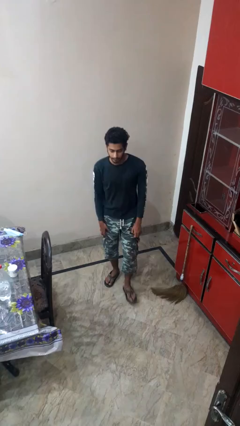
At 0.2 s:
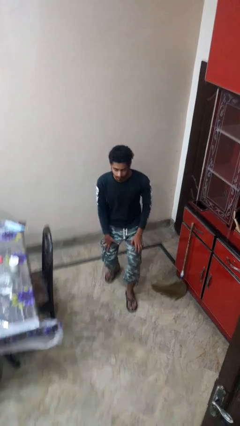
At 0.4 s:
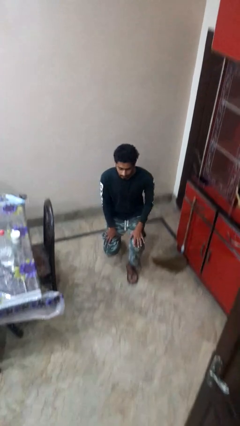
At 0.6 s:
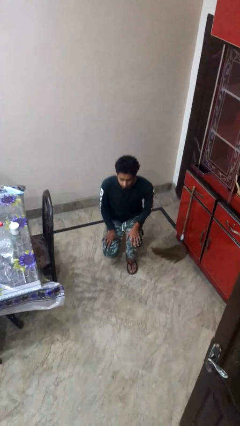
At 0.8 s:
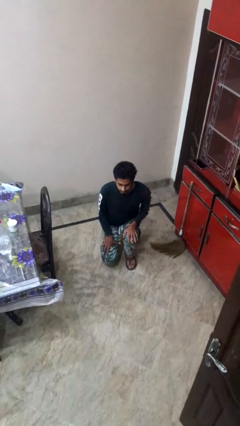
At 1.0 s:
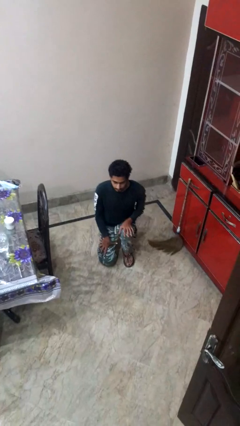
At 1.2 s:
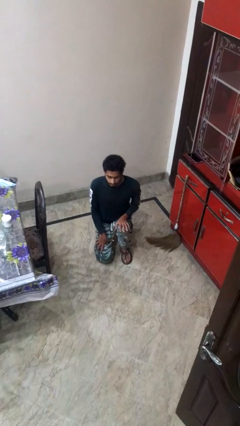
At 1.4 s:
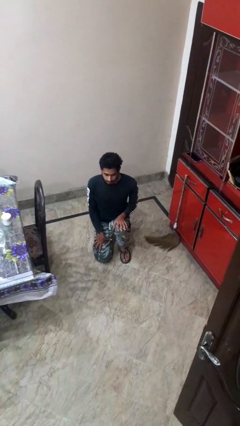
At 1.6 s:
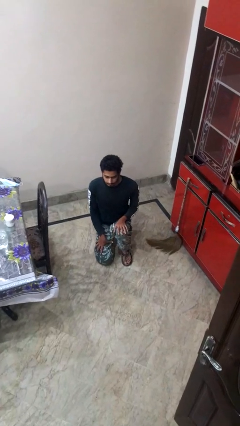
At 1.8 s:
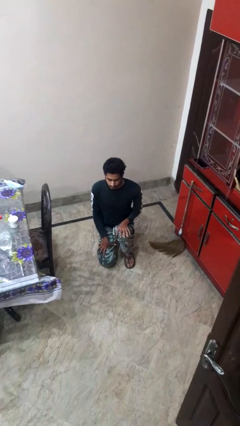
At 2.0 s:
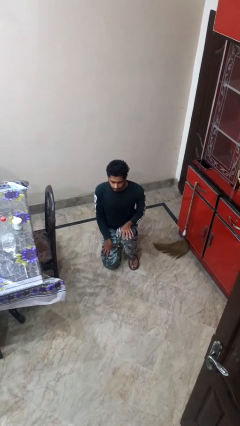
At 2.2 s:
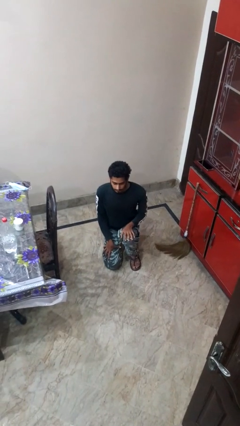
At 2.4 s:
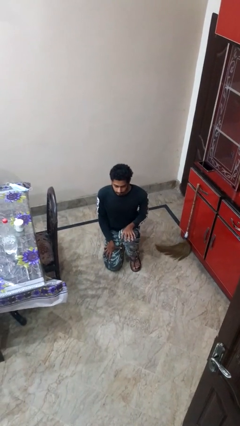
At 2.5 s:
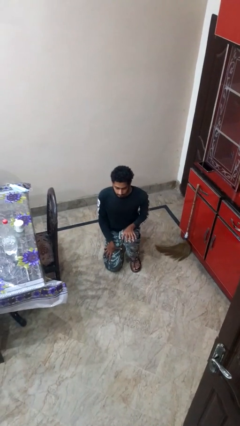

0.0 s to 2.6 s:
person kneels

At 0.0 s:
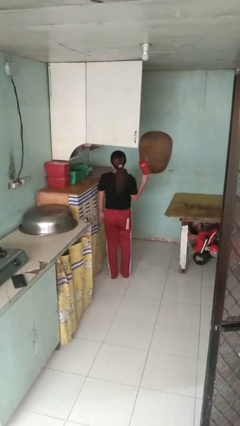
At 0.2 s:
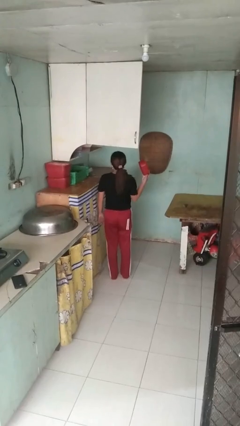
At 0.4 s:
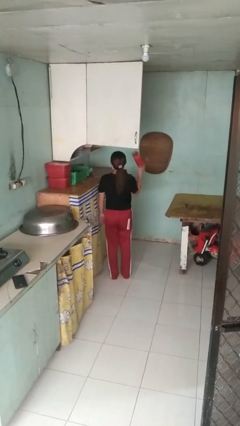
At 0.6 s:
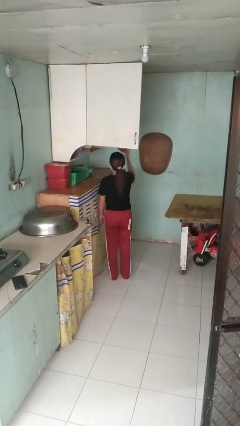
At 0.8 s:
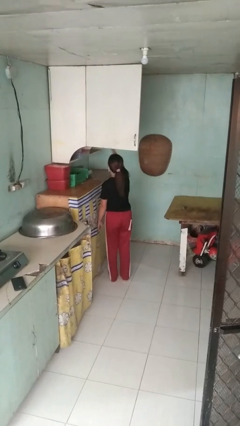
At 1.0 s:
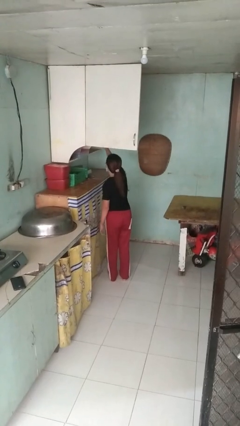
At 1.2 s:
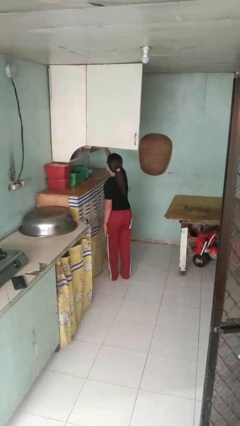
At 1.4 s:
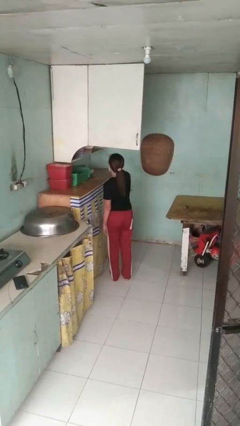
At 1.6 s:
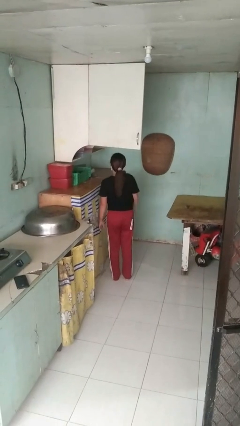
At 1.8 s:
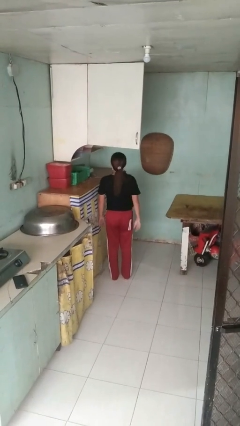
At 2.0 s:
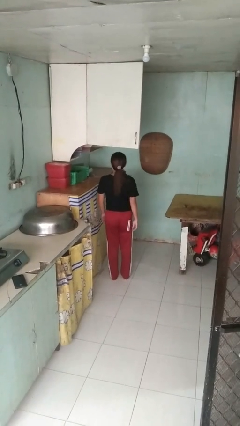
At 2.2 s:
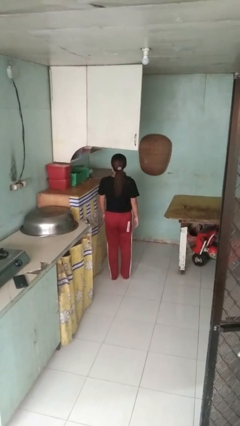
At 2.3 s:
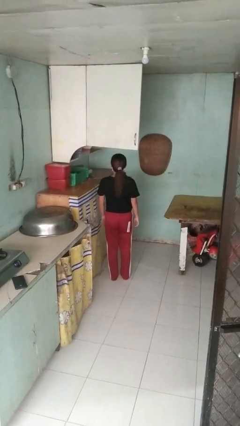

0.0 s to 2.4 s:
person puts object in cabinet

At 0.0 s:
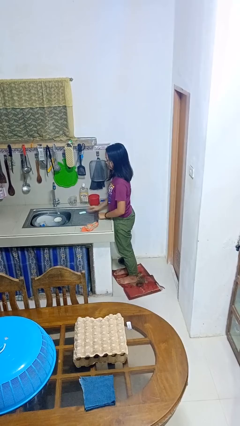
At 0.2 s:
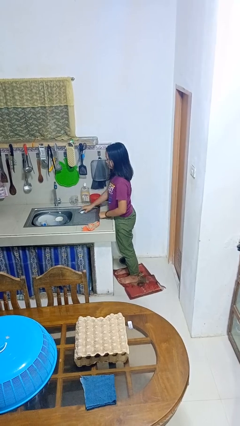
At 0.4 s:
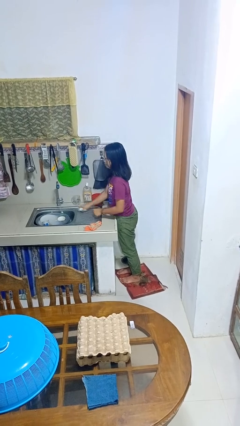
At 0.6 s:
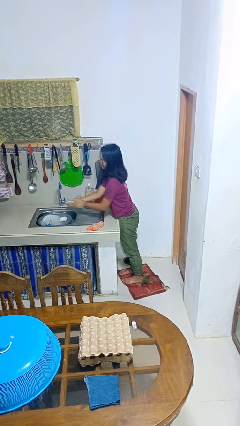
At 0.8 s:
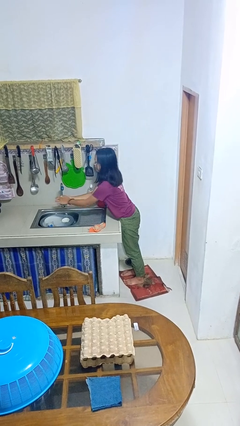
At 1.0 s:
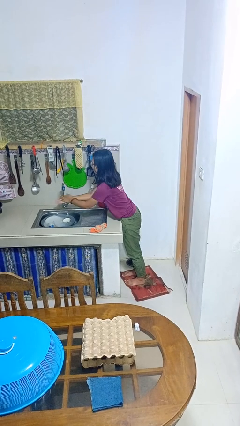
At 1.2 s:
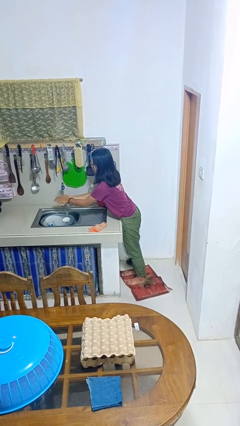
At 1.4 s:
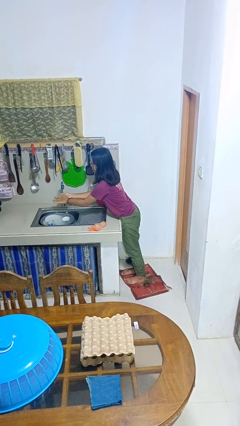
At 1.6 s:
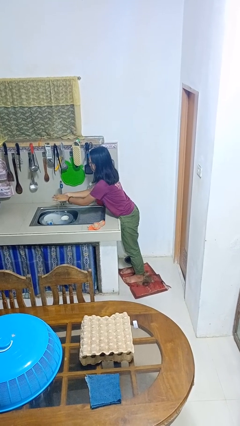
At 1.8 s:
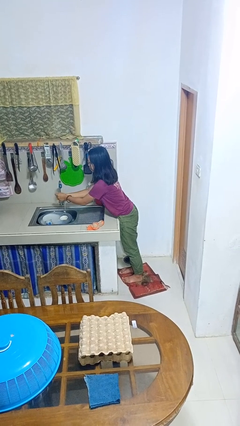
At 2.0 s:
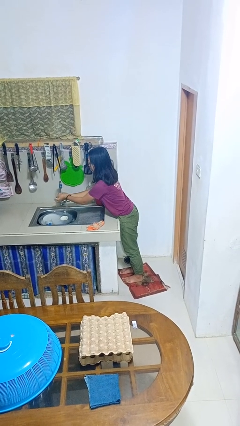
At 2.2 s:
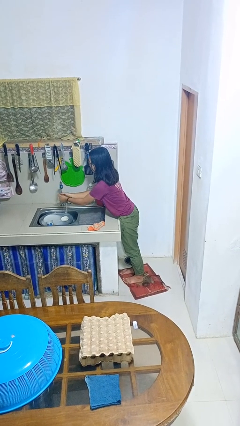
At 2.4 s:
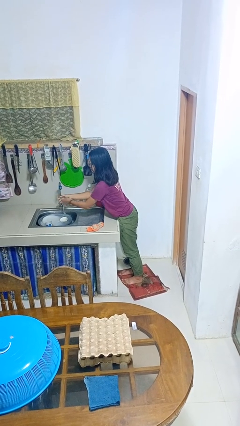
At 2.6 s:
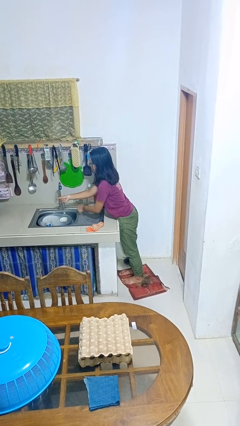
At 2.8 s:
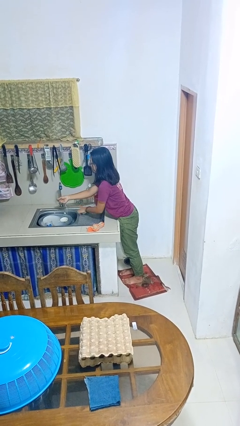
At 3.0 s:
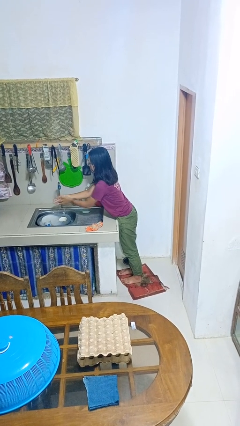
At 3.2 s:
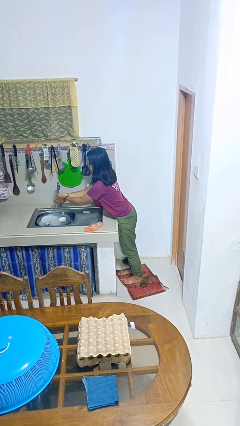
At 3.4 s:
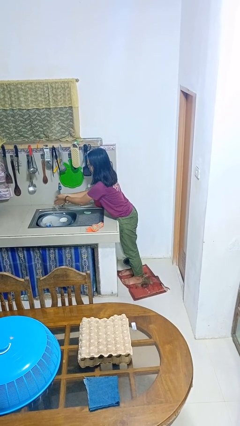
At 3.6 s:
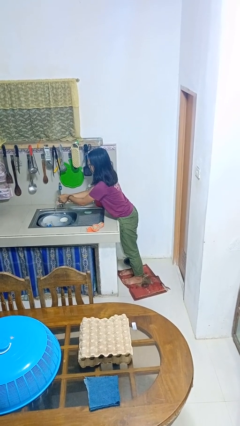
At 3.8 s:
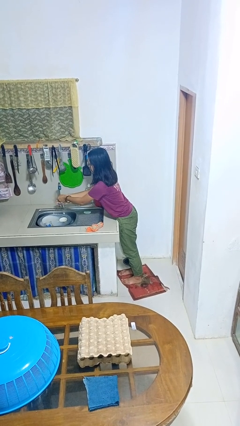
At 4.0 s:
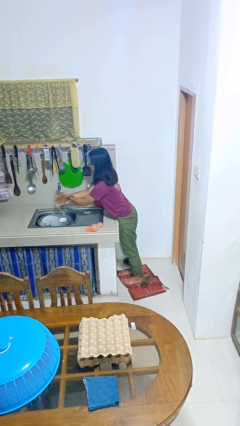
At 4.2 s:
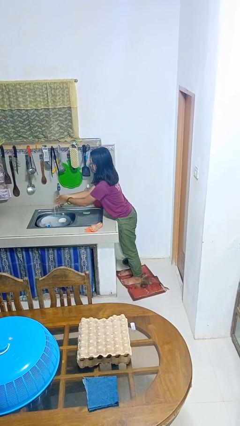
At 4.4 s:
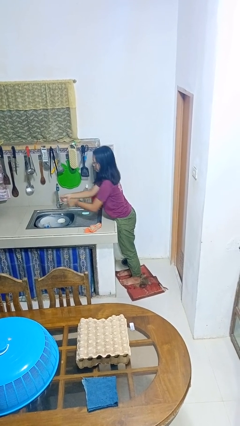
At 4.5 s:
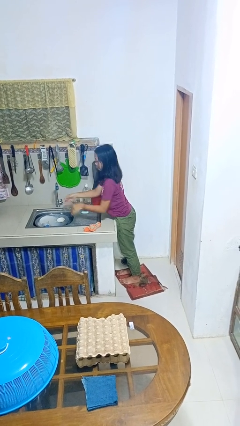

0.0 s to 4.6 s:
person washes hands

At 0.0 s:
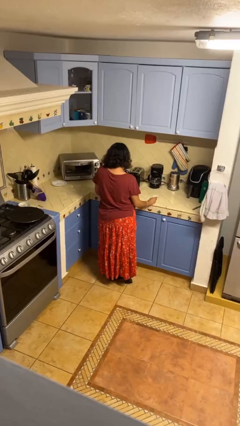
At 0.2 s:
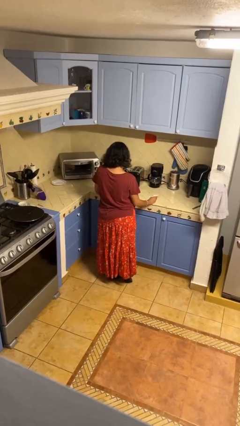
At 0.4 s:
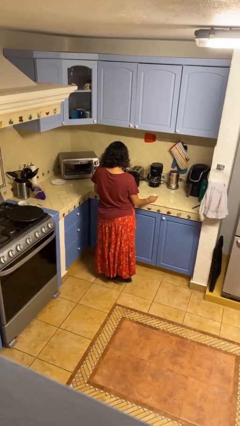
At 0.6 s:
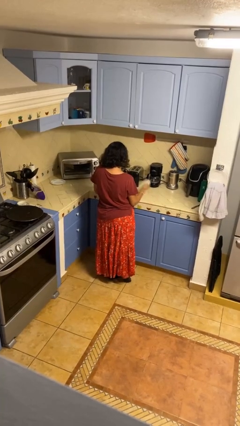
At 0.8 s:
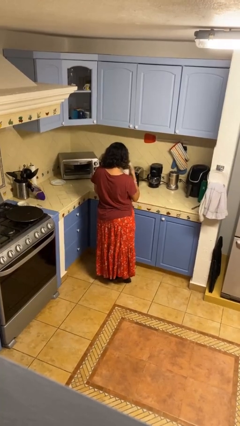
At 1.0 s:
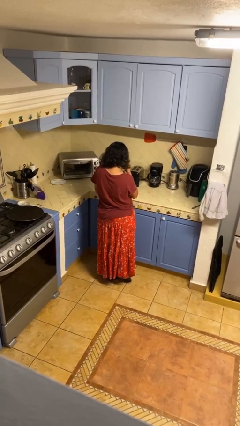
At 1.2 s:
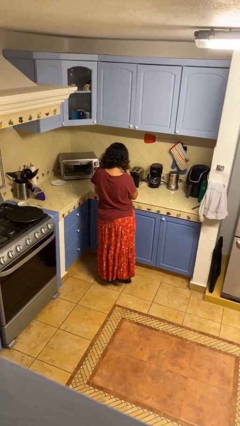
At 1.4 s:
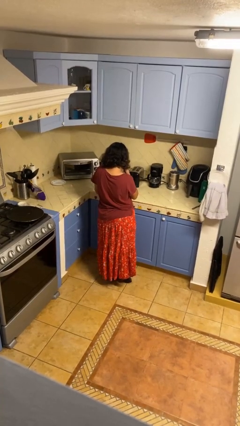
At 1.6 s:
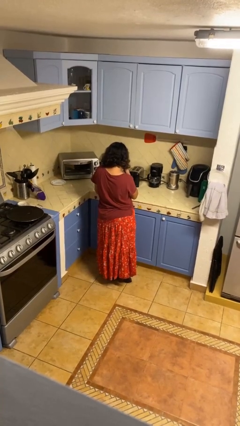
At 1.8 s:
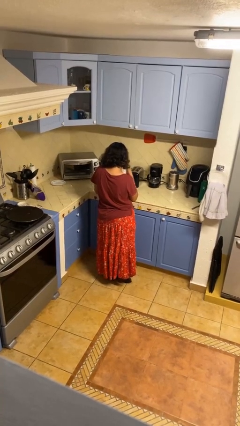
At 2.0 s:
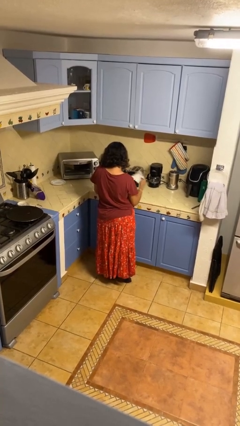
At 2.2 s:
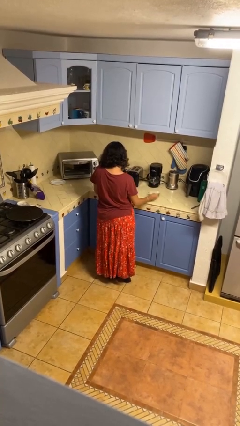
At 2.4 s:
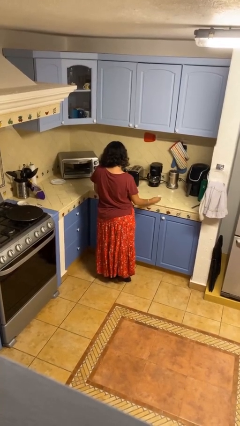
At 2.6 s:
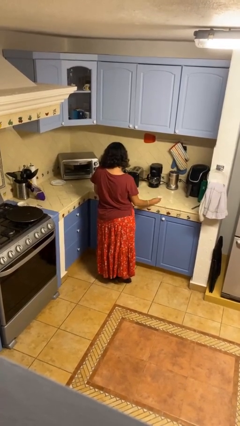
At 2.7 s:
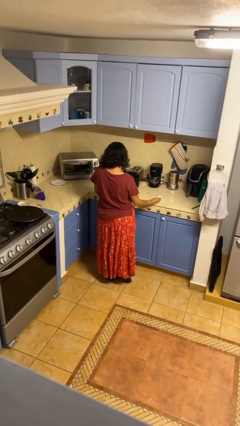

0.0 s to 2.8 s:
person wipes mouth with napkin

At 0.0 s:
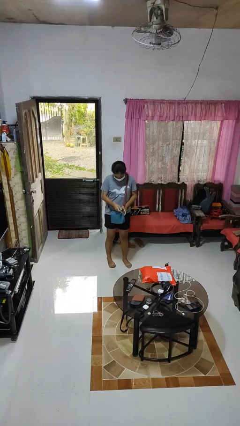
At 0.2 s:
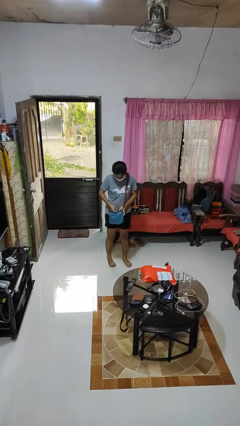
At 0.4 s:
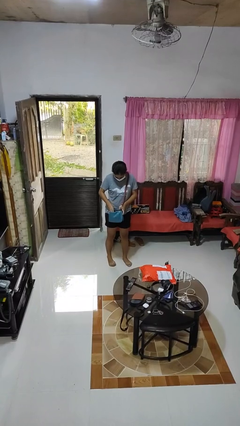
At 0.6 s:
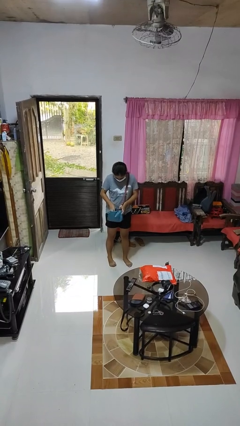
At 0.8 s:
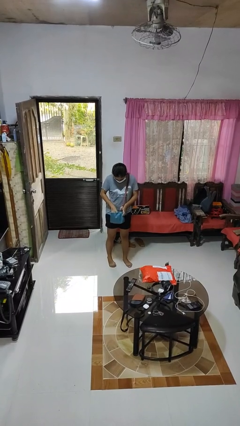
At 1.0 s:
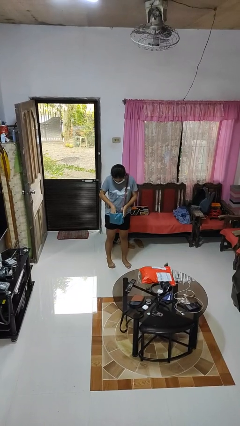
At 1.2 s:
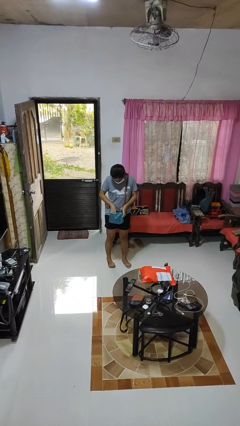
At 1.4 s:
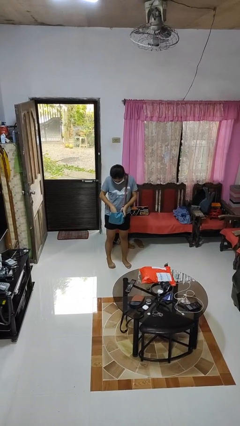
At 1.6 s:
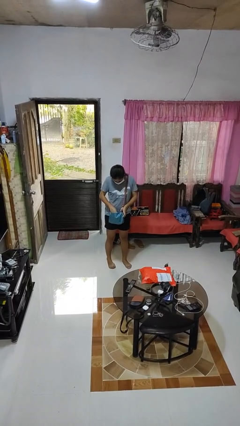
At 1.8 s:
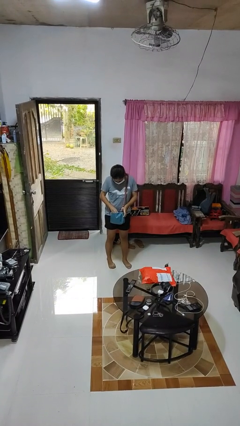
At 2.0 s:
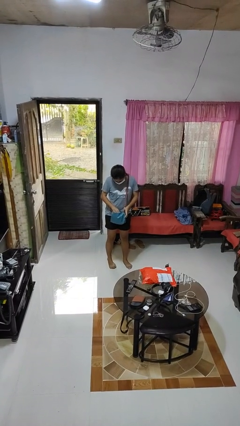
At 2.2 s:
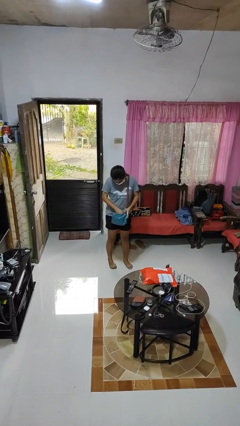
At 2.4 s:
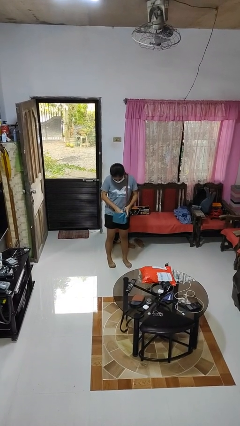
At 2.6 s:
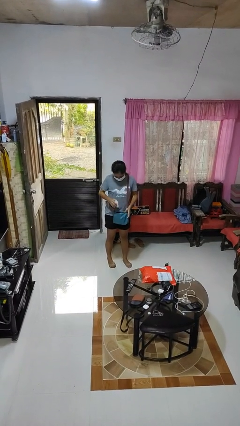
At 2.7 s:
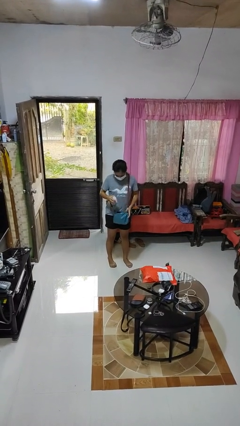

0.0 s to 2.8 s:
person searches in purse

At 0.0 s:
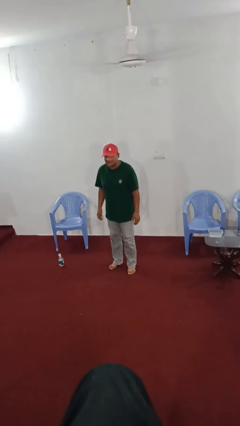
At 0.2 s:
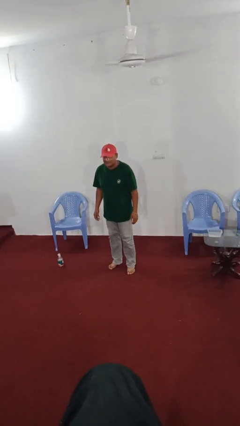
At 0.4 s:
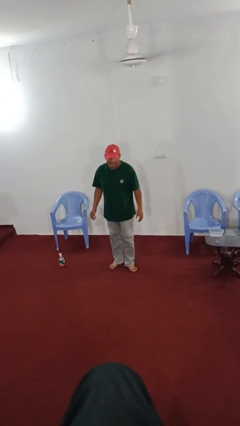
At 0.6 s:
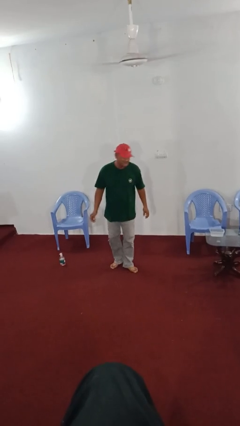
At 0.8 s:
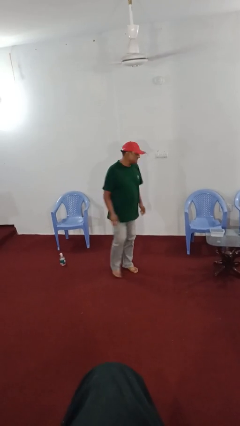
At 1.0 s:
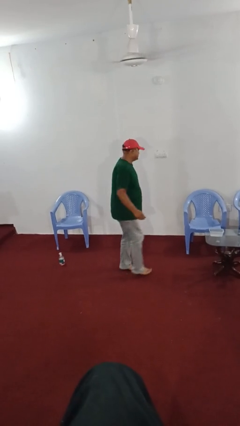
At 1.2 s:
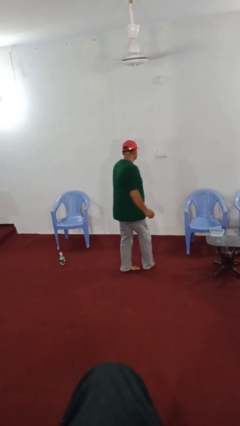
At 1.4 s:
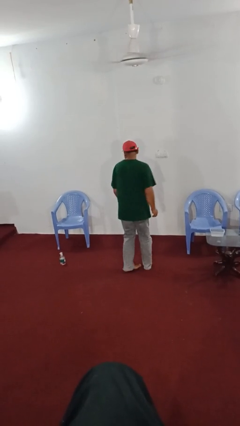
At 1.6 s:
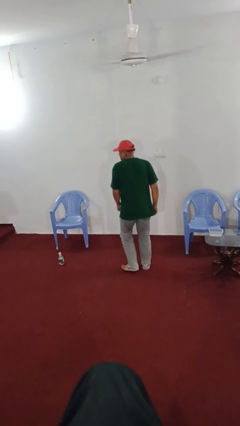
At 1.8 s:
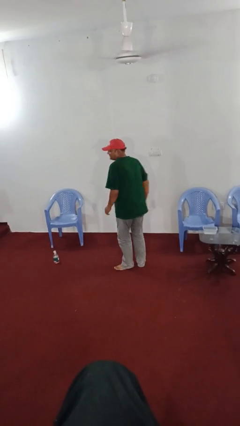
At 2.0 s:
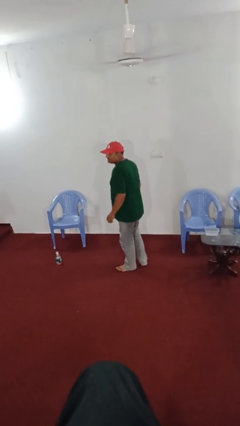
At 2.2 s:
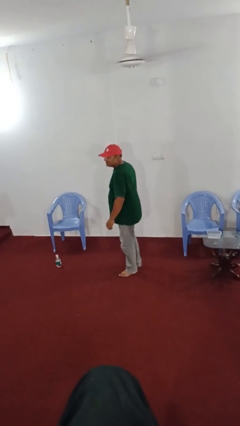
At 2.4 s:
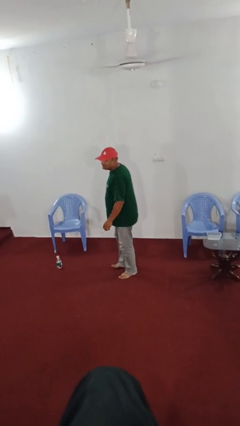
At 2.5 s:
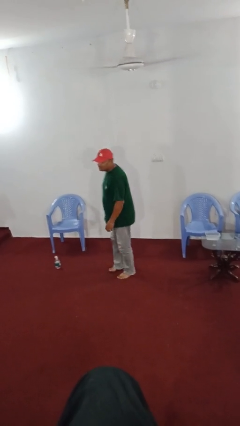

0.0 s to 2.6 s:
person twirls
